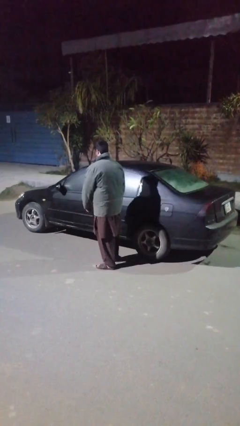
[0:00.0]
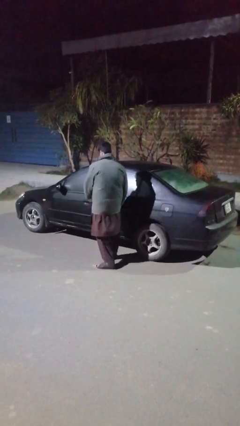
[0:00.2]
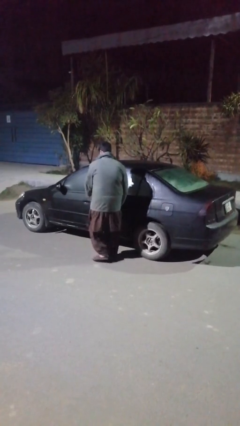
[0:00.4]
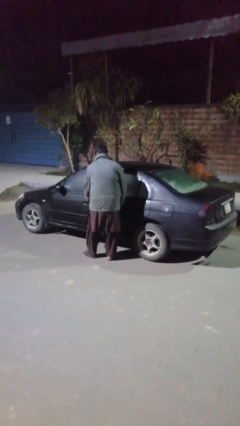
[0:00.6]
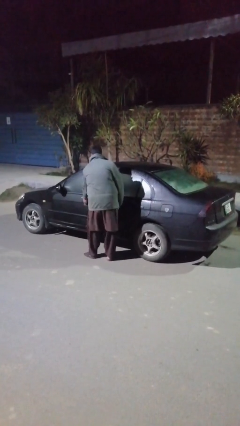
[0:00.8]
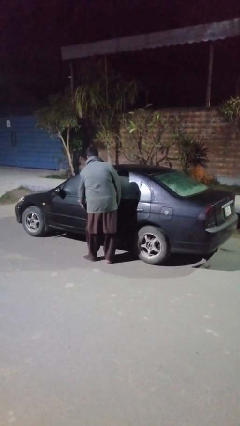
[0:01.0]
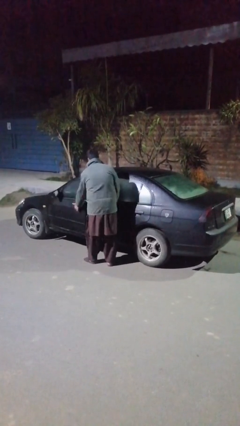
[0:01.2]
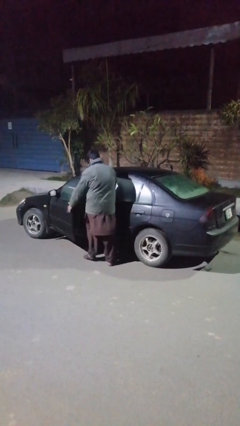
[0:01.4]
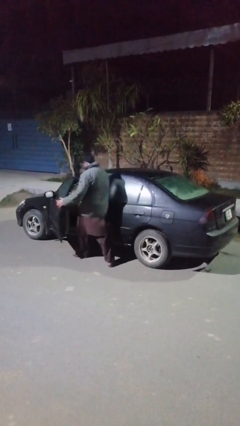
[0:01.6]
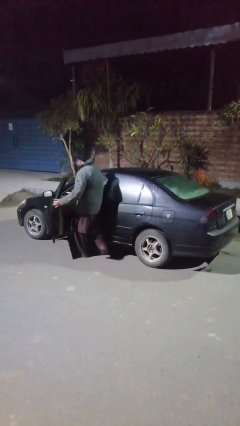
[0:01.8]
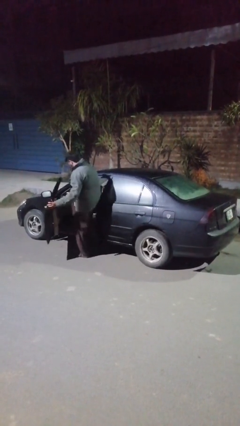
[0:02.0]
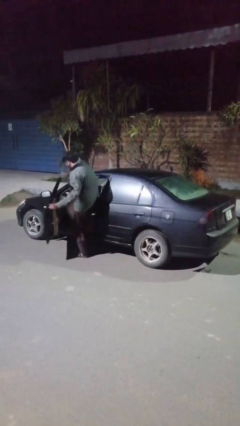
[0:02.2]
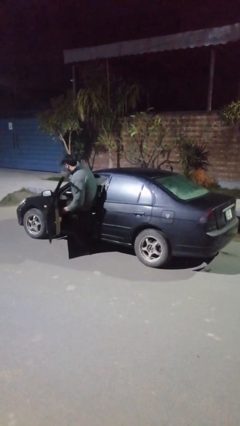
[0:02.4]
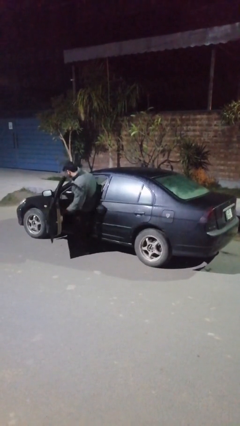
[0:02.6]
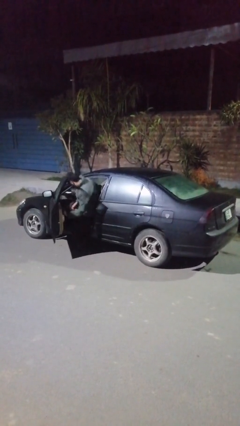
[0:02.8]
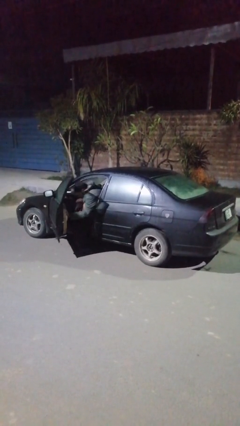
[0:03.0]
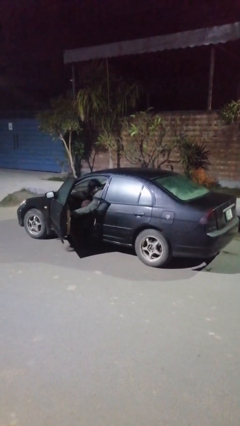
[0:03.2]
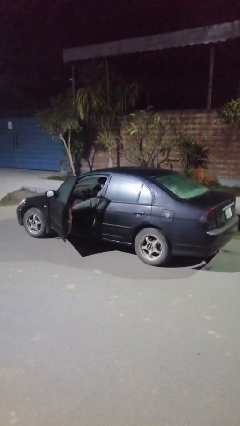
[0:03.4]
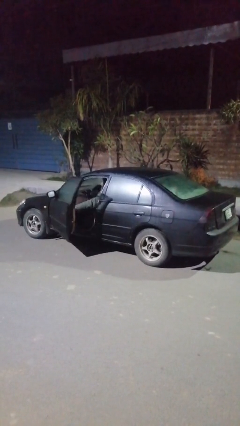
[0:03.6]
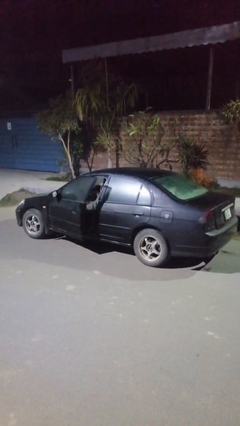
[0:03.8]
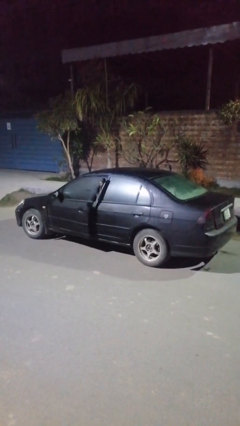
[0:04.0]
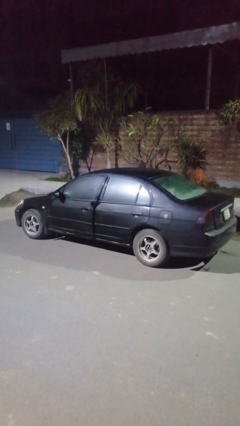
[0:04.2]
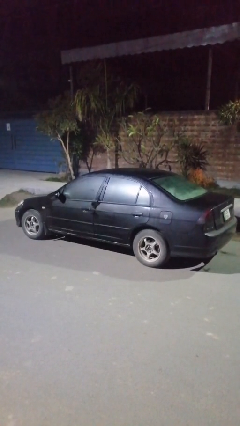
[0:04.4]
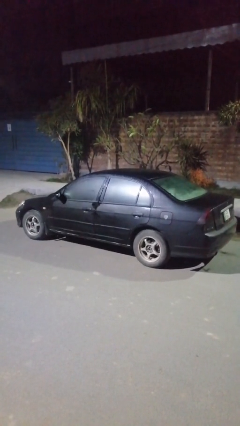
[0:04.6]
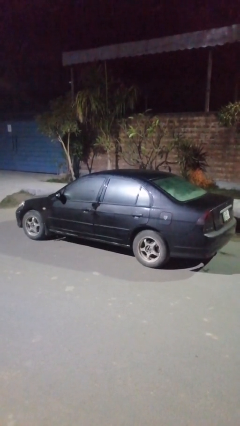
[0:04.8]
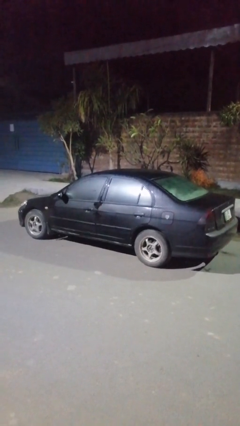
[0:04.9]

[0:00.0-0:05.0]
car picks up person

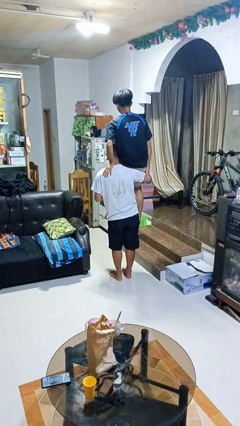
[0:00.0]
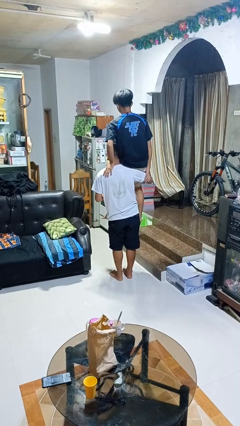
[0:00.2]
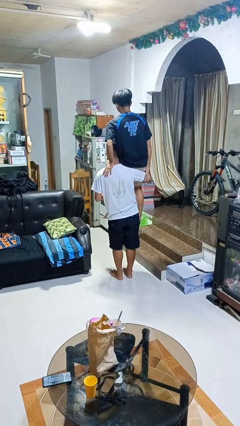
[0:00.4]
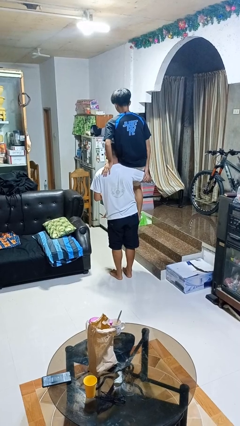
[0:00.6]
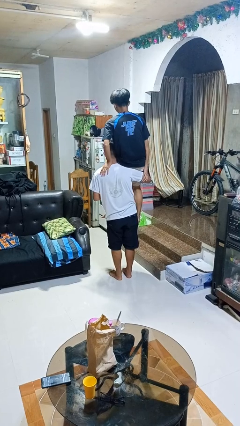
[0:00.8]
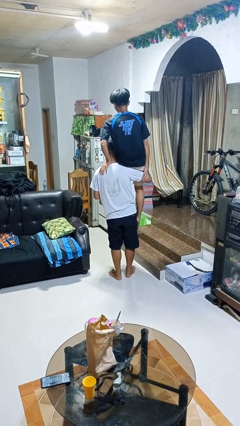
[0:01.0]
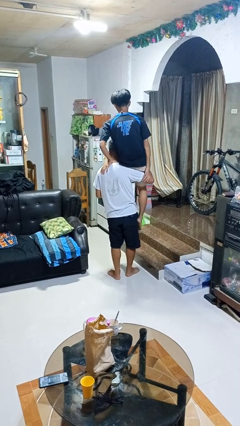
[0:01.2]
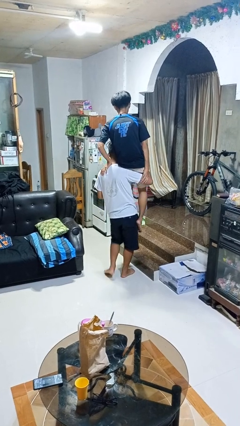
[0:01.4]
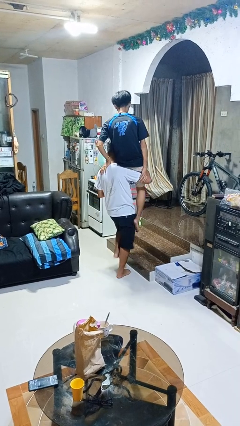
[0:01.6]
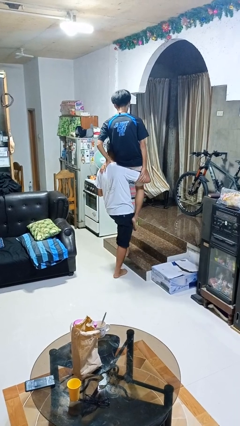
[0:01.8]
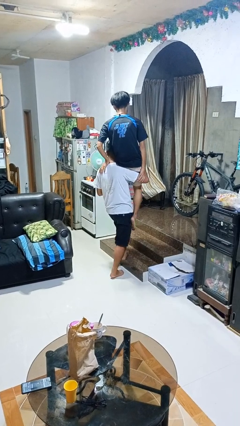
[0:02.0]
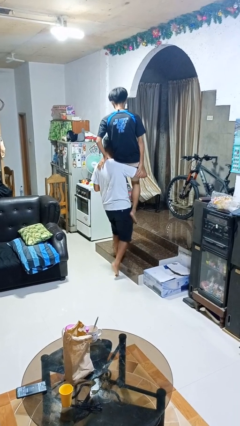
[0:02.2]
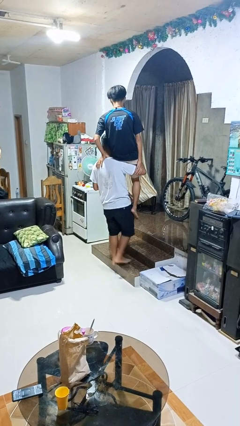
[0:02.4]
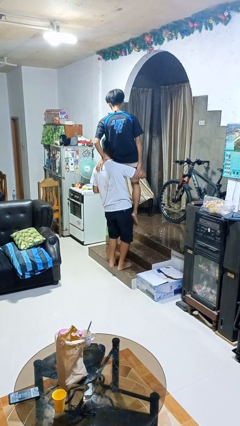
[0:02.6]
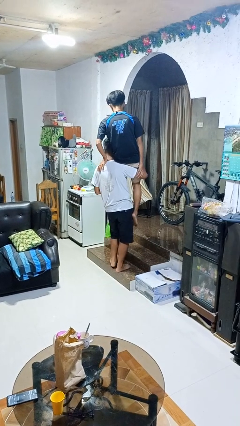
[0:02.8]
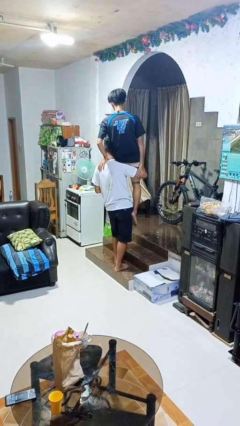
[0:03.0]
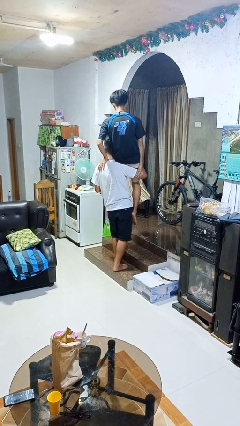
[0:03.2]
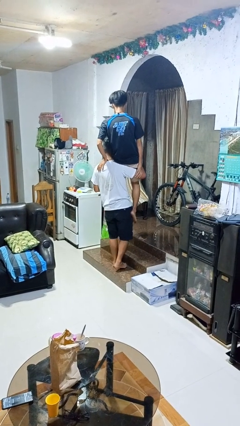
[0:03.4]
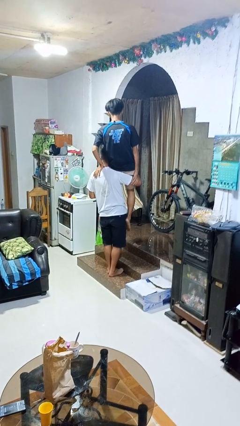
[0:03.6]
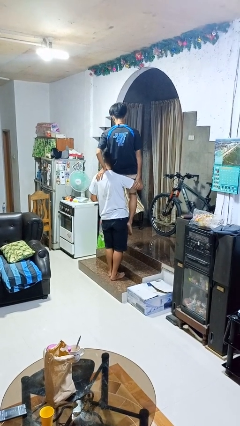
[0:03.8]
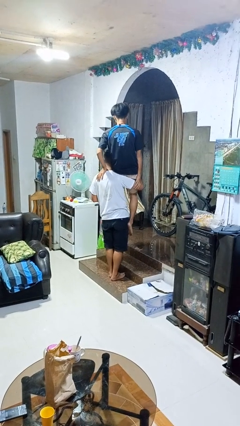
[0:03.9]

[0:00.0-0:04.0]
person carries person on shoulders

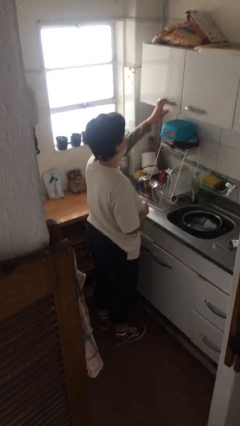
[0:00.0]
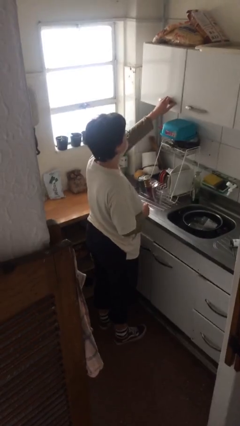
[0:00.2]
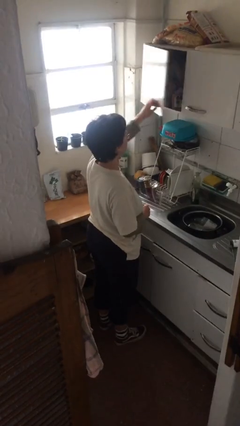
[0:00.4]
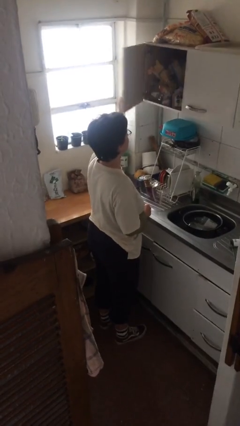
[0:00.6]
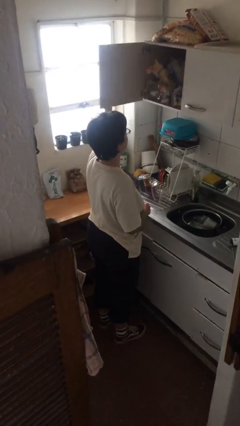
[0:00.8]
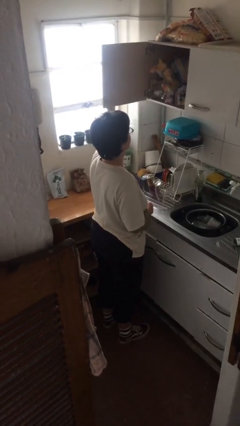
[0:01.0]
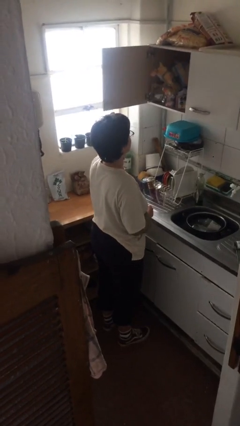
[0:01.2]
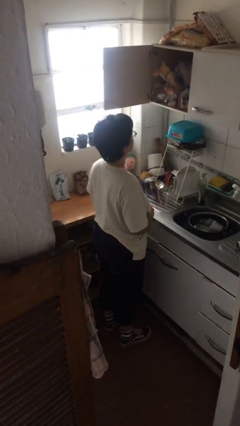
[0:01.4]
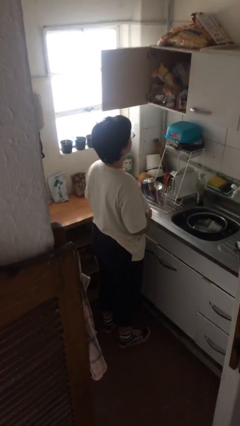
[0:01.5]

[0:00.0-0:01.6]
person opens cabinet

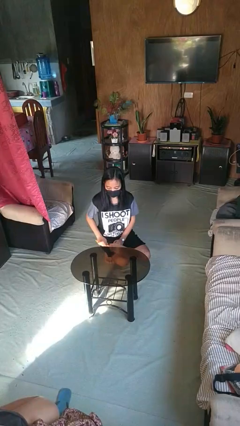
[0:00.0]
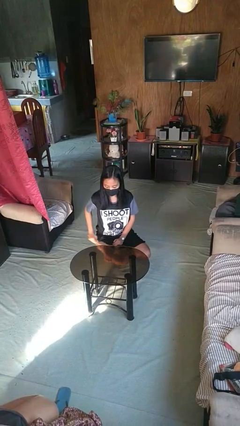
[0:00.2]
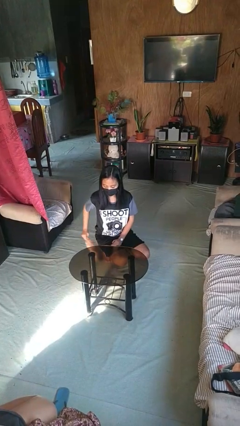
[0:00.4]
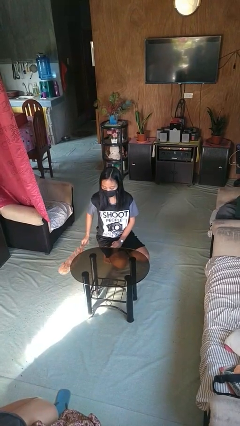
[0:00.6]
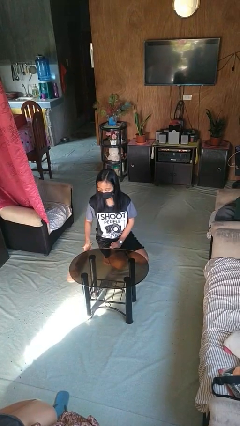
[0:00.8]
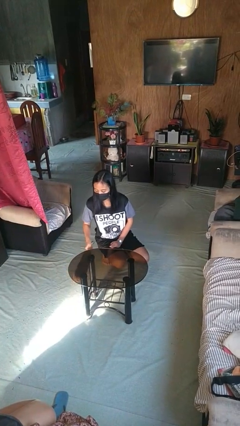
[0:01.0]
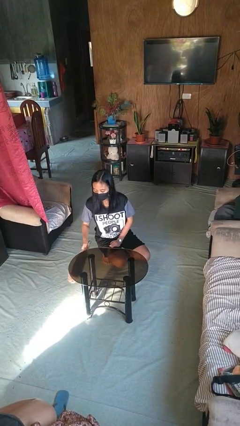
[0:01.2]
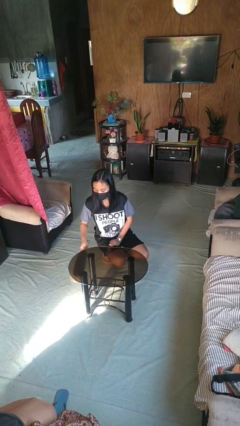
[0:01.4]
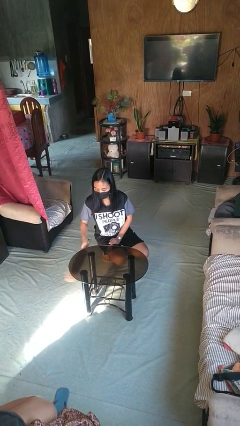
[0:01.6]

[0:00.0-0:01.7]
person dusts furniture

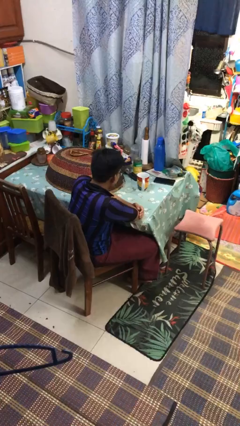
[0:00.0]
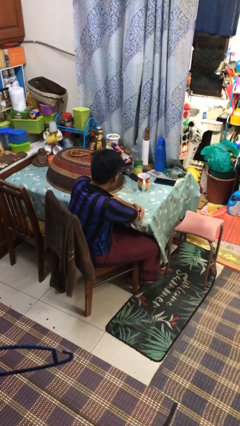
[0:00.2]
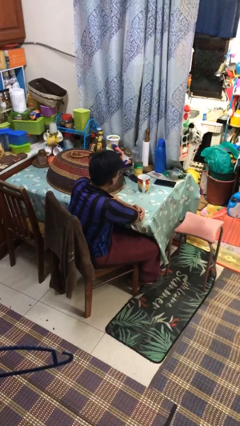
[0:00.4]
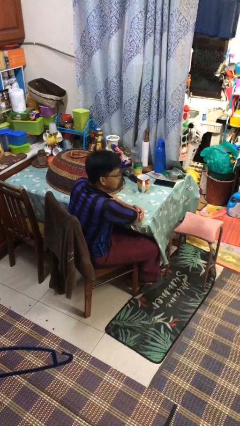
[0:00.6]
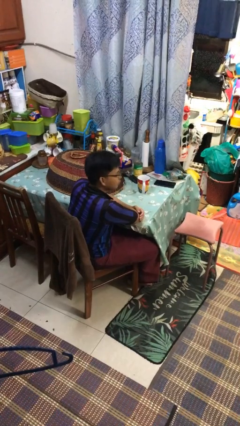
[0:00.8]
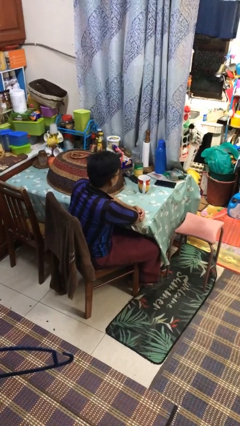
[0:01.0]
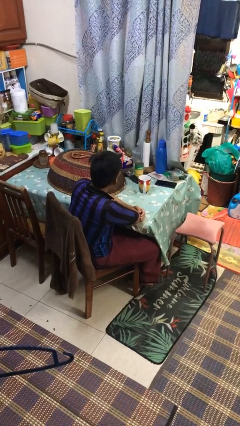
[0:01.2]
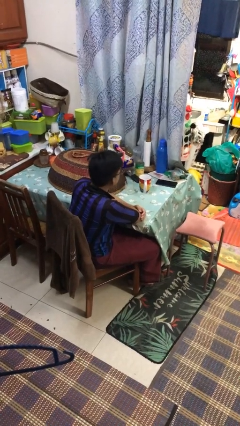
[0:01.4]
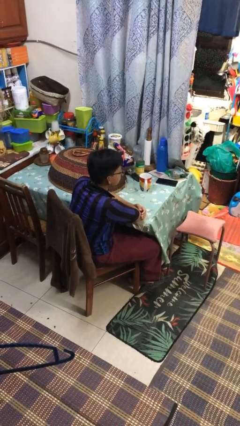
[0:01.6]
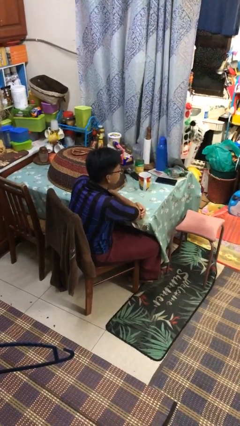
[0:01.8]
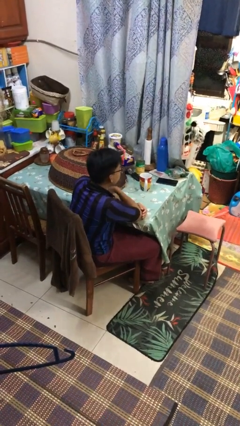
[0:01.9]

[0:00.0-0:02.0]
person shakes head

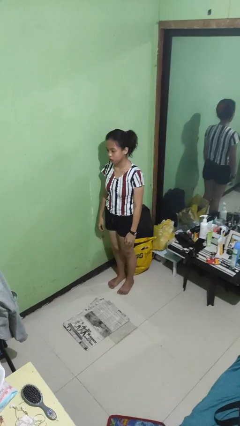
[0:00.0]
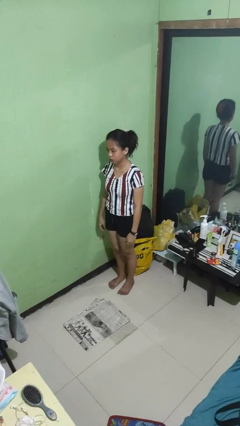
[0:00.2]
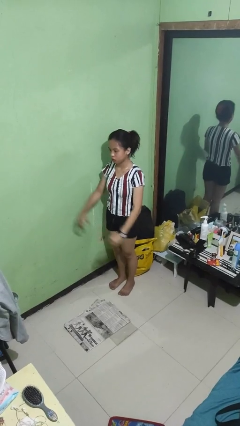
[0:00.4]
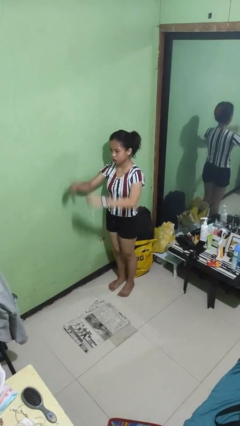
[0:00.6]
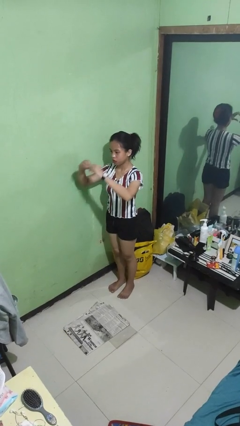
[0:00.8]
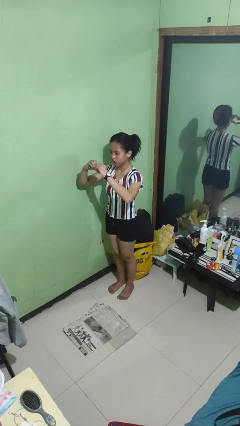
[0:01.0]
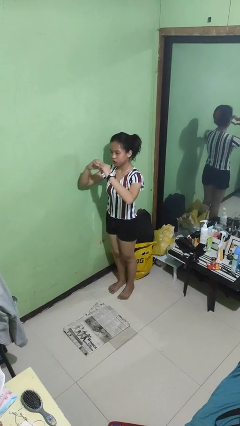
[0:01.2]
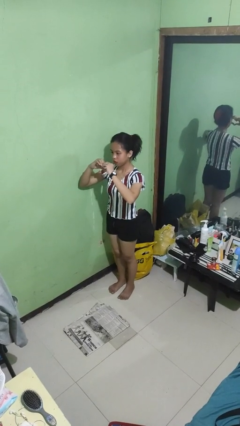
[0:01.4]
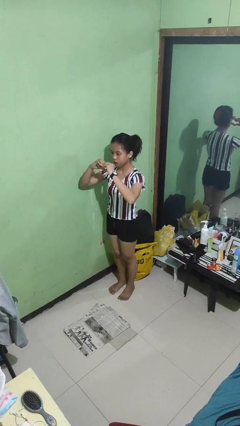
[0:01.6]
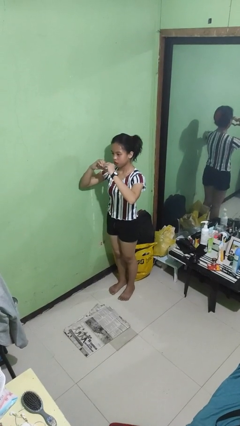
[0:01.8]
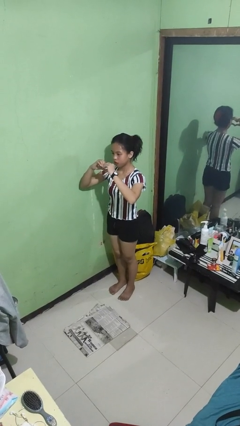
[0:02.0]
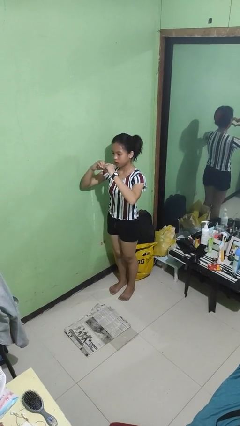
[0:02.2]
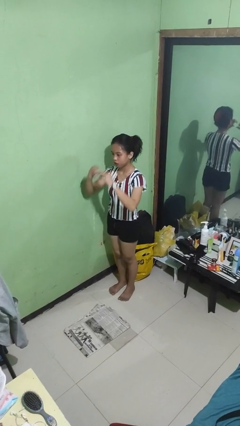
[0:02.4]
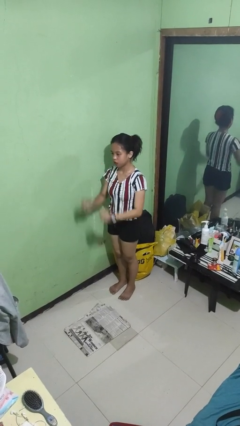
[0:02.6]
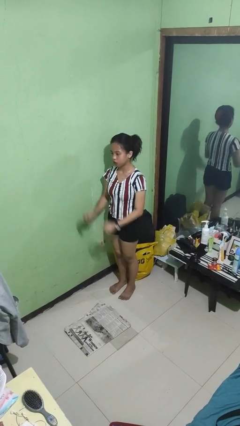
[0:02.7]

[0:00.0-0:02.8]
person gestures heart

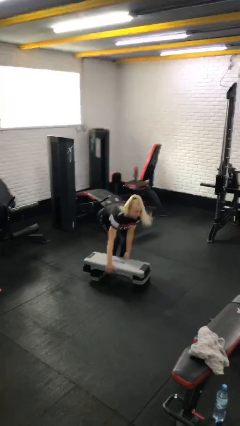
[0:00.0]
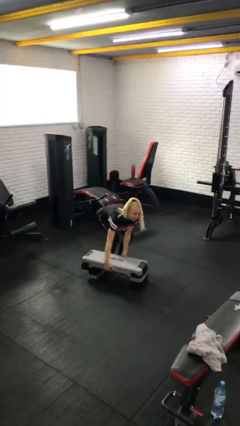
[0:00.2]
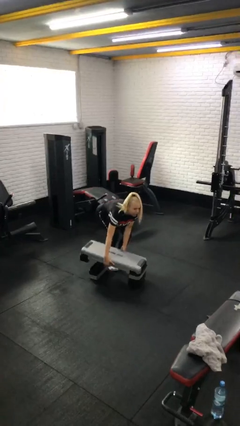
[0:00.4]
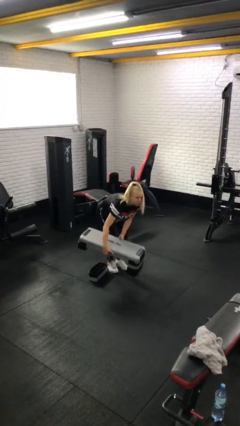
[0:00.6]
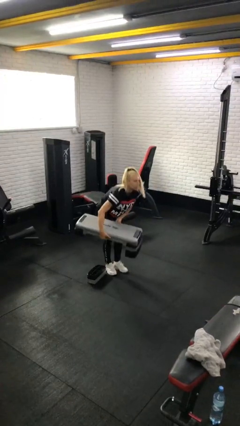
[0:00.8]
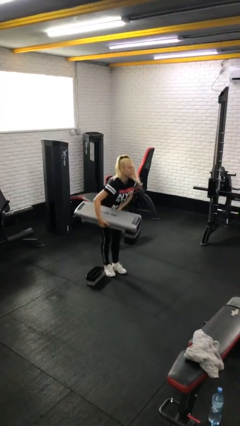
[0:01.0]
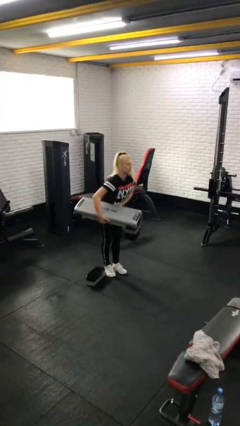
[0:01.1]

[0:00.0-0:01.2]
person picks up object from floor
